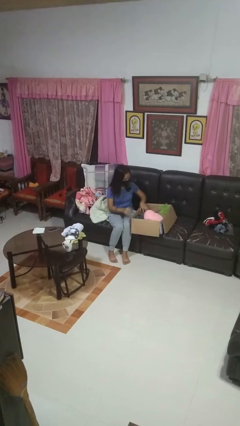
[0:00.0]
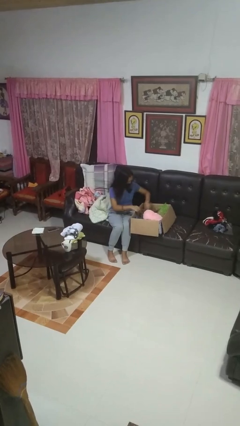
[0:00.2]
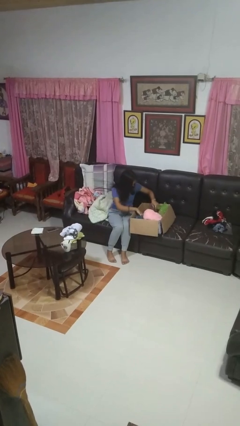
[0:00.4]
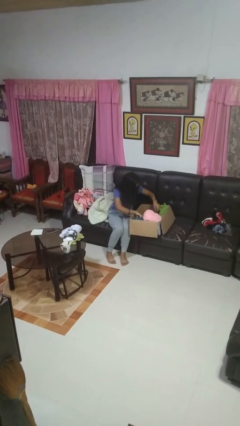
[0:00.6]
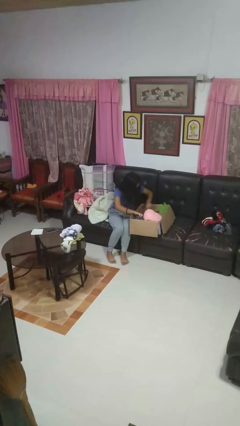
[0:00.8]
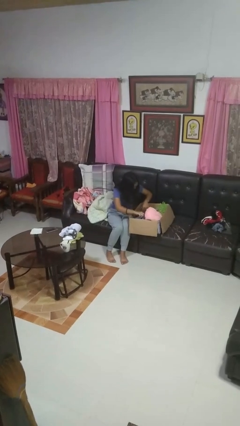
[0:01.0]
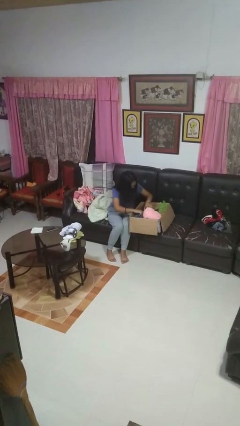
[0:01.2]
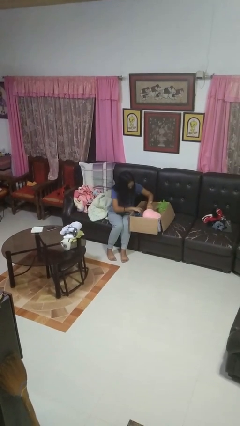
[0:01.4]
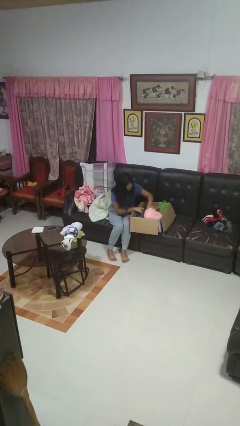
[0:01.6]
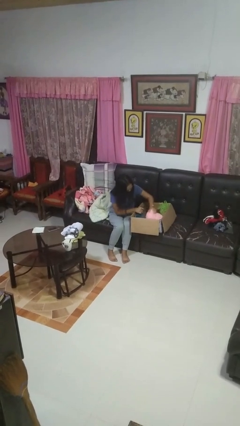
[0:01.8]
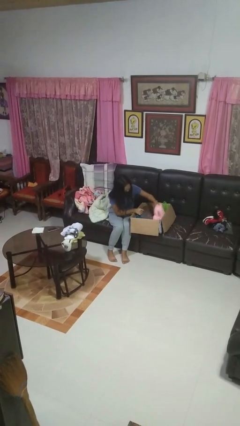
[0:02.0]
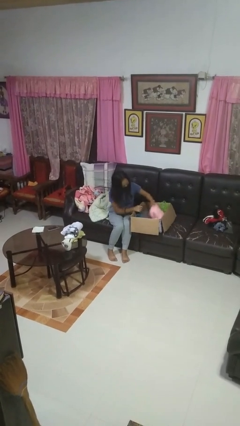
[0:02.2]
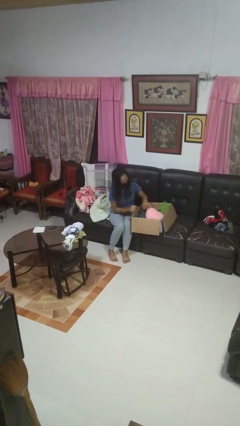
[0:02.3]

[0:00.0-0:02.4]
person searches in box

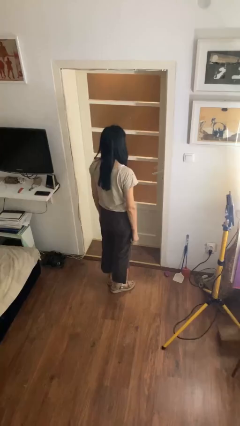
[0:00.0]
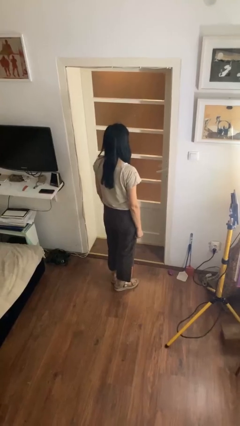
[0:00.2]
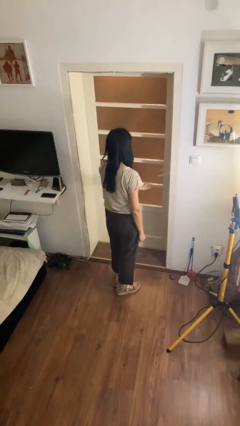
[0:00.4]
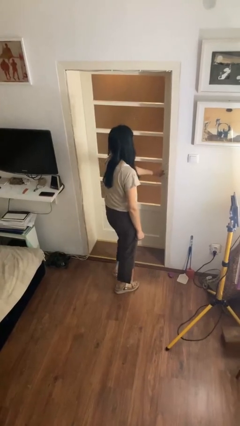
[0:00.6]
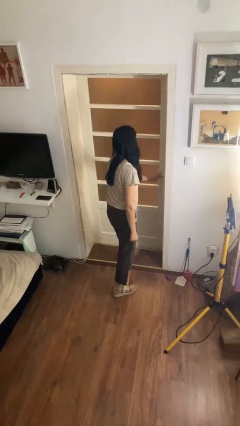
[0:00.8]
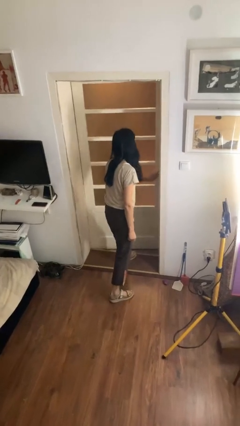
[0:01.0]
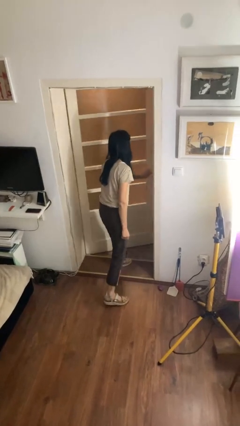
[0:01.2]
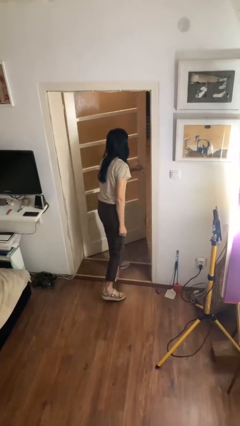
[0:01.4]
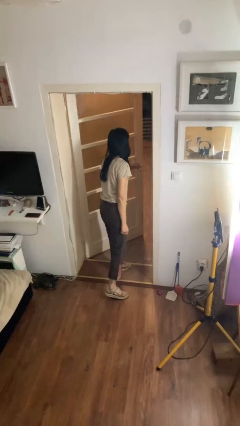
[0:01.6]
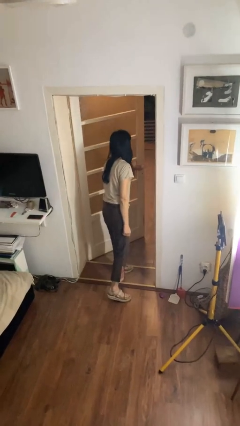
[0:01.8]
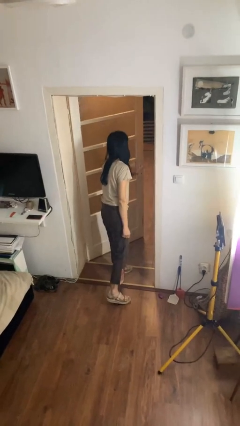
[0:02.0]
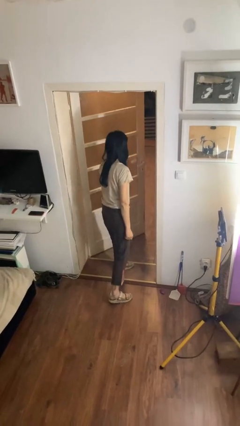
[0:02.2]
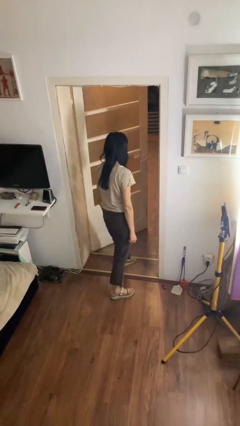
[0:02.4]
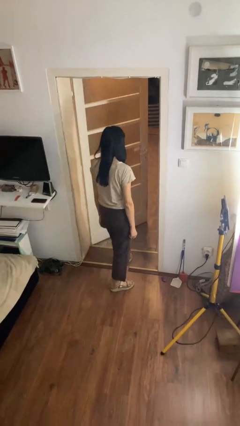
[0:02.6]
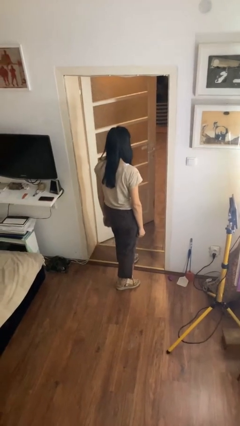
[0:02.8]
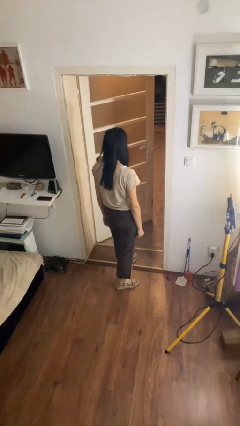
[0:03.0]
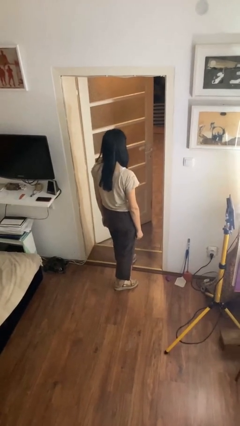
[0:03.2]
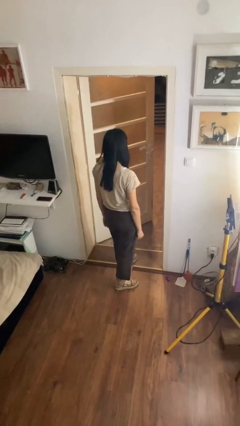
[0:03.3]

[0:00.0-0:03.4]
person opens facility door

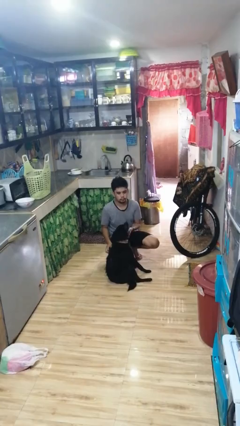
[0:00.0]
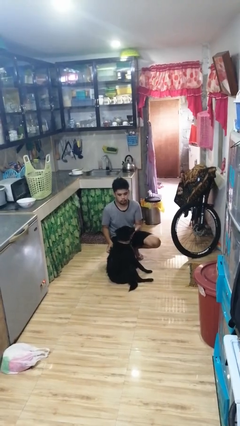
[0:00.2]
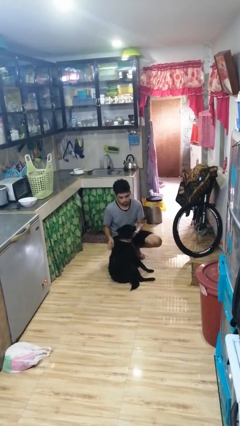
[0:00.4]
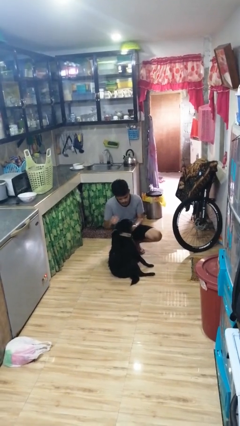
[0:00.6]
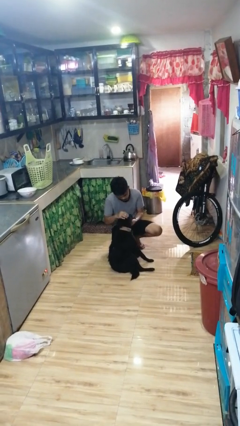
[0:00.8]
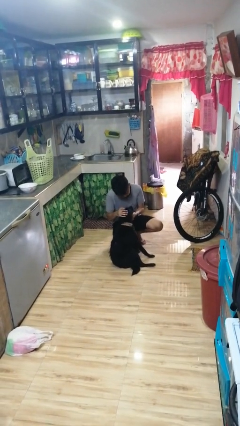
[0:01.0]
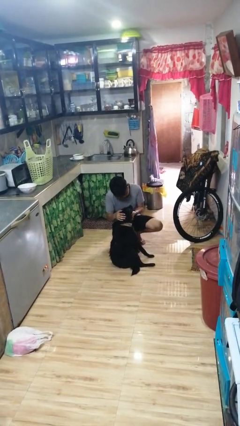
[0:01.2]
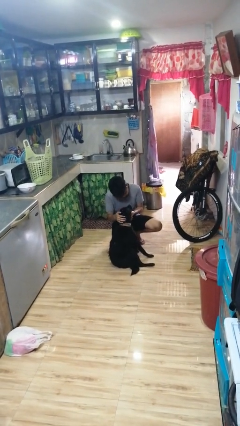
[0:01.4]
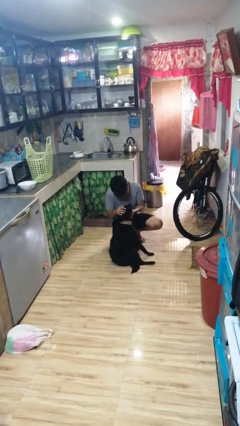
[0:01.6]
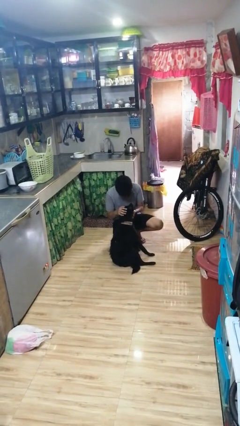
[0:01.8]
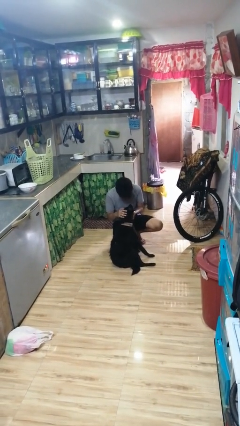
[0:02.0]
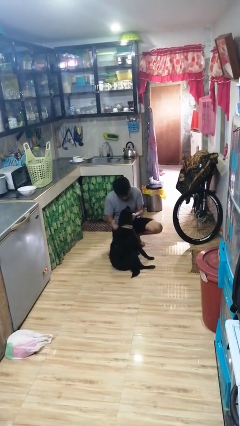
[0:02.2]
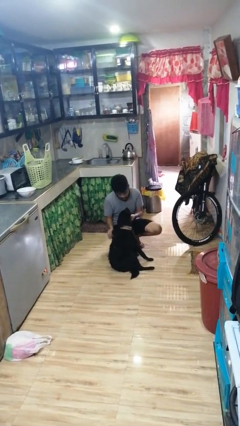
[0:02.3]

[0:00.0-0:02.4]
person pets dog

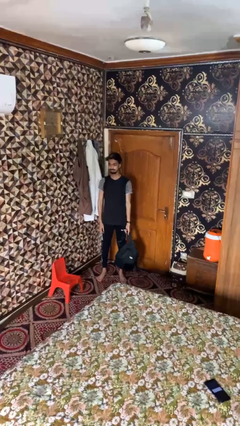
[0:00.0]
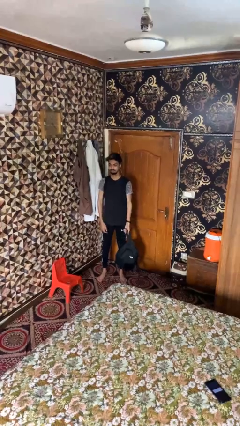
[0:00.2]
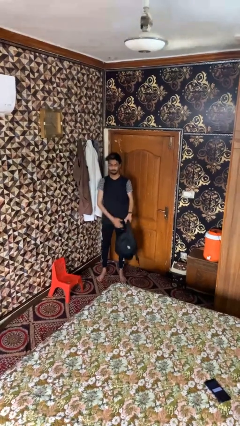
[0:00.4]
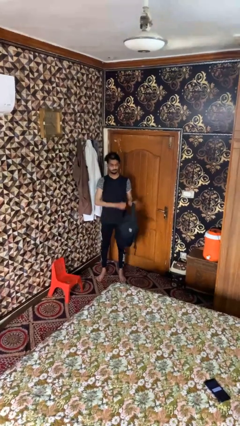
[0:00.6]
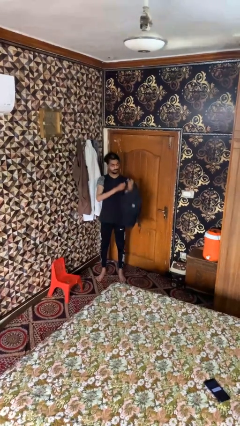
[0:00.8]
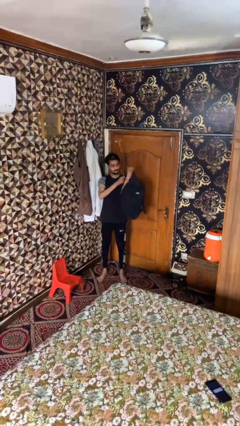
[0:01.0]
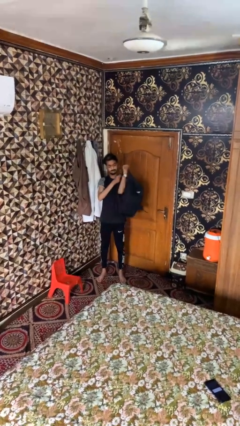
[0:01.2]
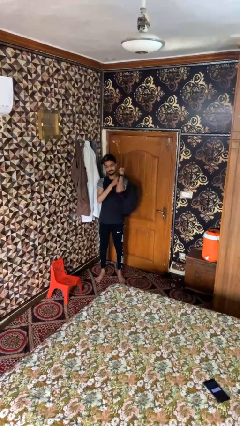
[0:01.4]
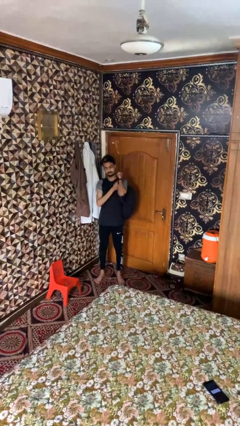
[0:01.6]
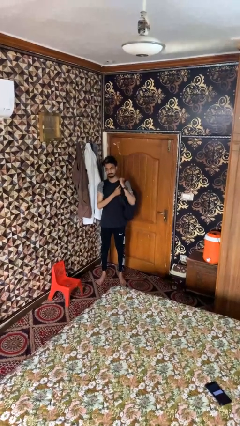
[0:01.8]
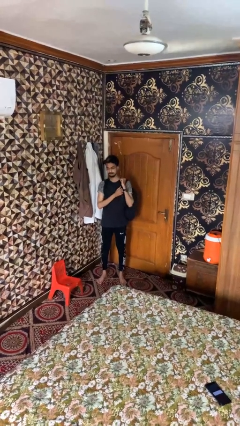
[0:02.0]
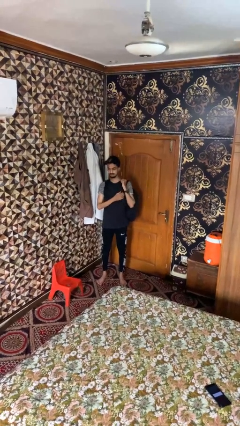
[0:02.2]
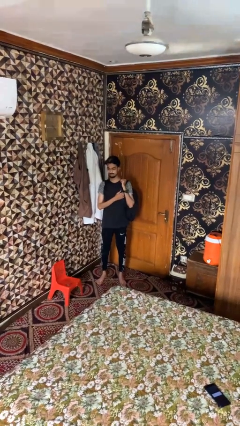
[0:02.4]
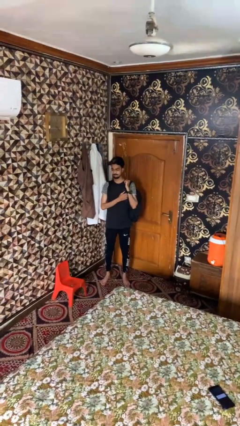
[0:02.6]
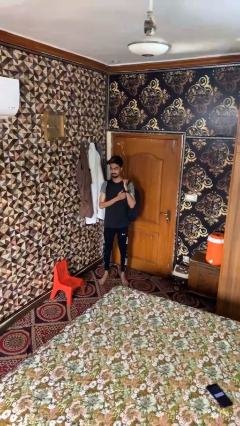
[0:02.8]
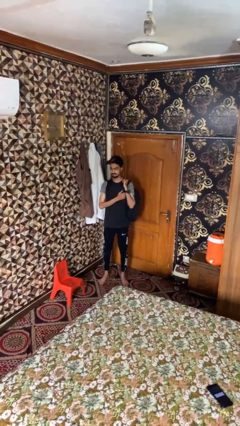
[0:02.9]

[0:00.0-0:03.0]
person puts on backpack

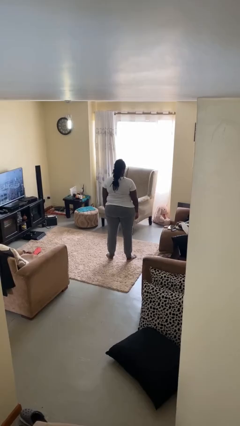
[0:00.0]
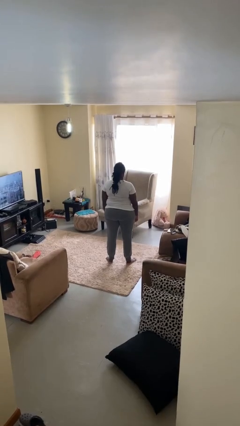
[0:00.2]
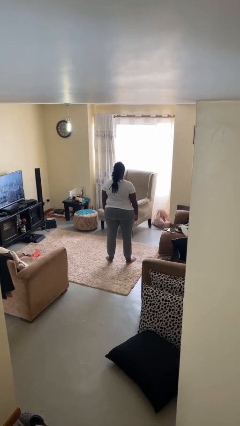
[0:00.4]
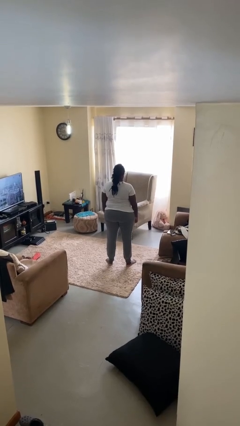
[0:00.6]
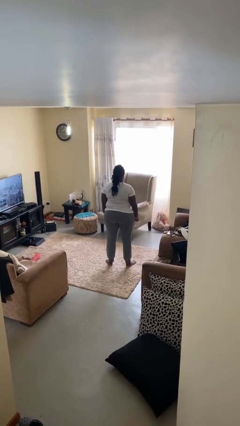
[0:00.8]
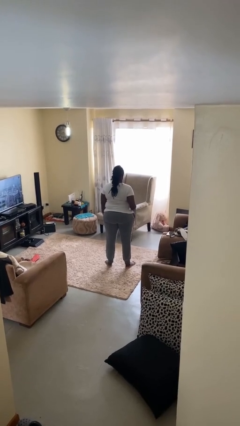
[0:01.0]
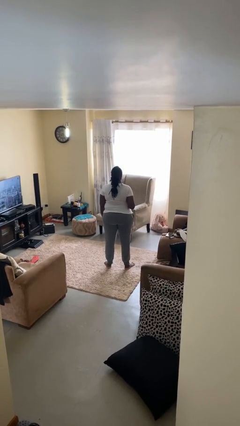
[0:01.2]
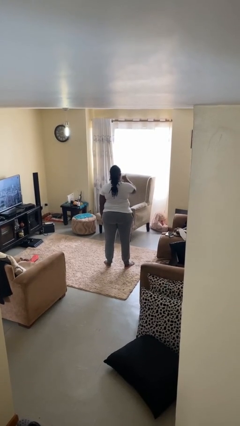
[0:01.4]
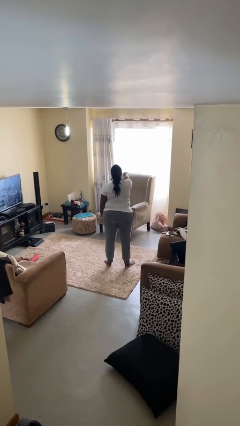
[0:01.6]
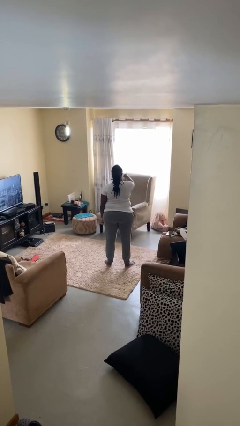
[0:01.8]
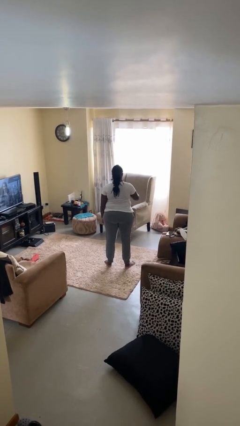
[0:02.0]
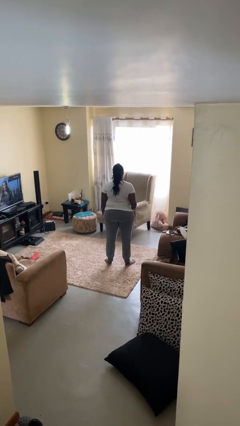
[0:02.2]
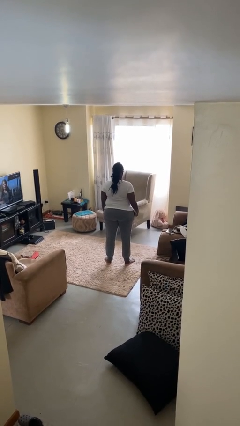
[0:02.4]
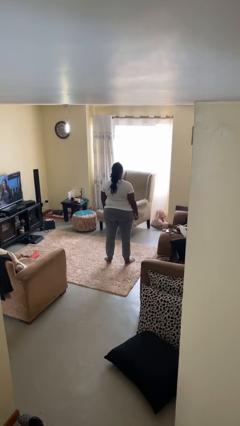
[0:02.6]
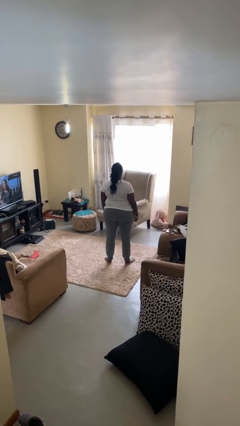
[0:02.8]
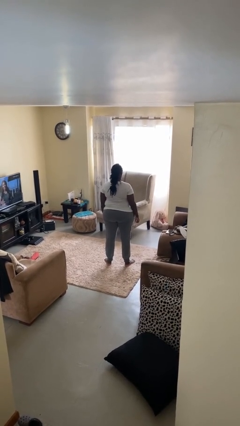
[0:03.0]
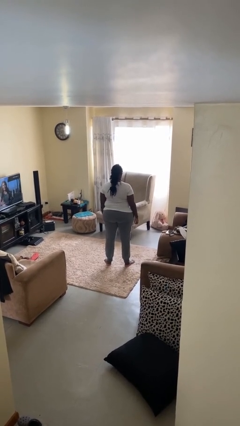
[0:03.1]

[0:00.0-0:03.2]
person punches

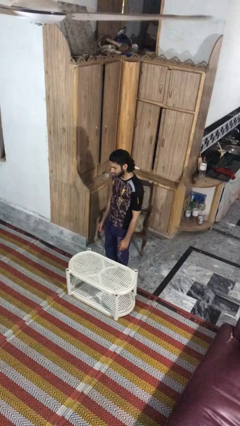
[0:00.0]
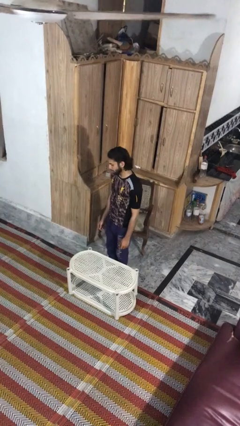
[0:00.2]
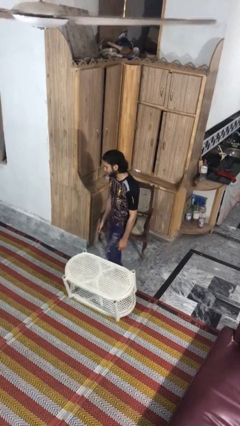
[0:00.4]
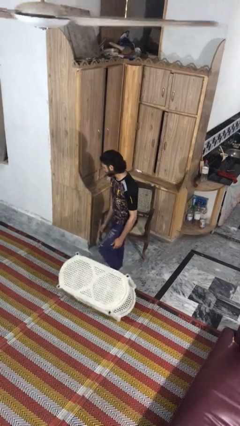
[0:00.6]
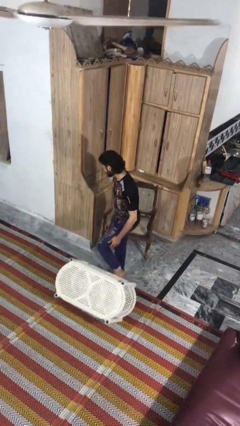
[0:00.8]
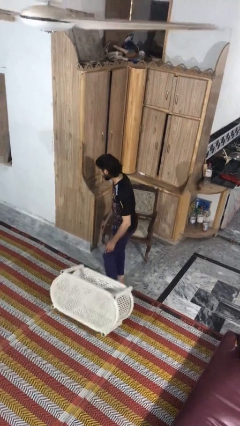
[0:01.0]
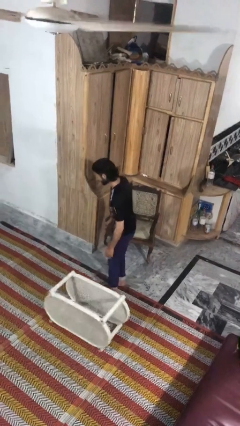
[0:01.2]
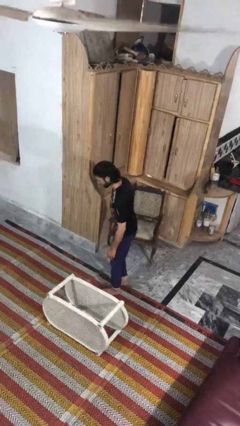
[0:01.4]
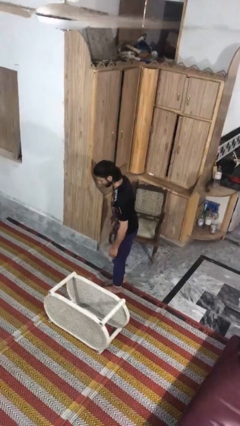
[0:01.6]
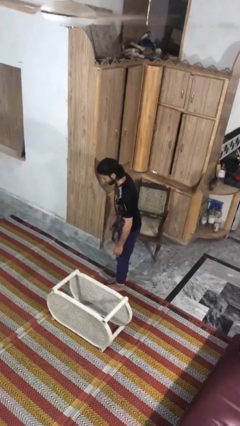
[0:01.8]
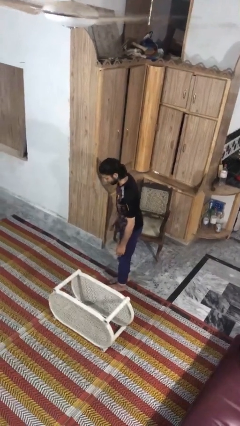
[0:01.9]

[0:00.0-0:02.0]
person knocks over furniture

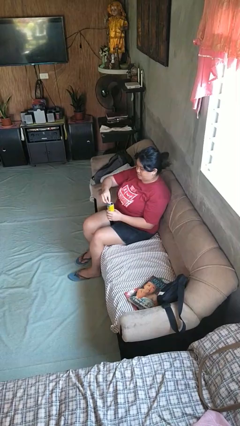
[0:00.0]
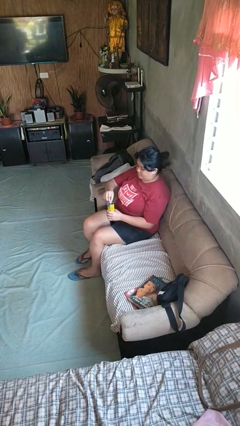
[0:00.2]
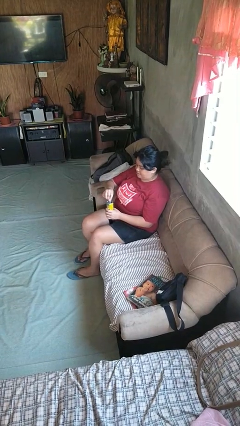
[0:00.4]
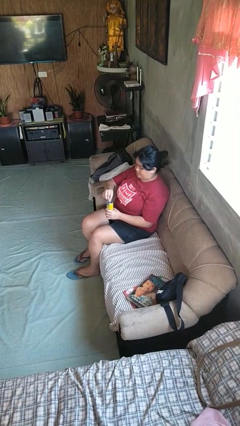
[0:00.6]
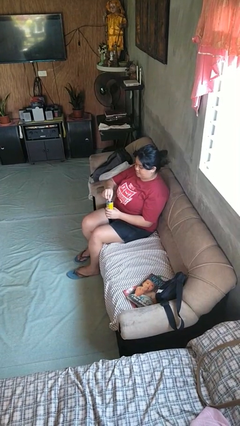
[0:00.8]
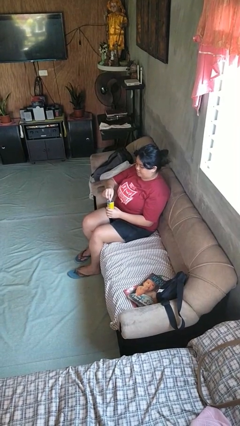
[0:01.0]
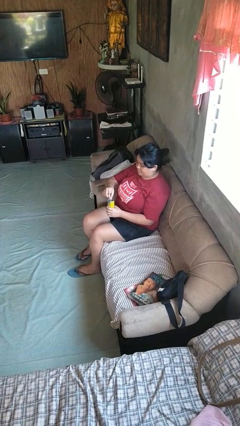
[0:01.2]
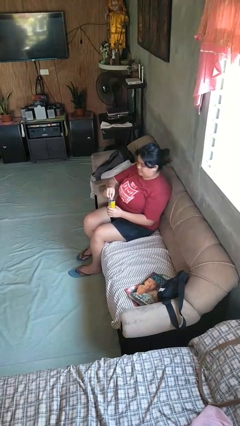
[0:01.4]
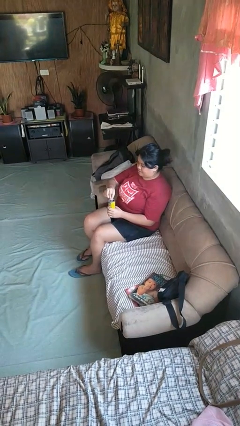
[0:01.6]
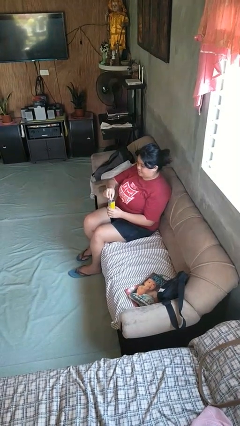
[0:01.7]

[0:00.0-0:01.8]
person opens beverage can
